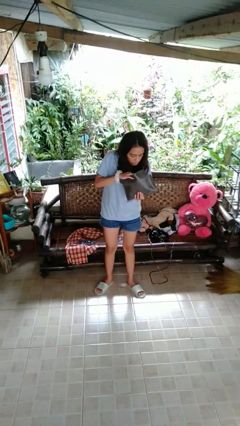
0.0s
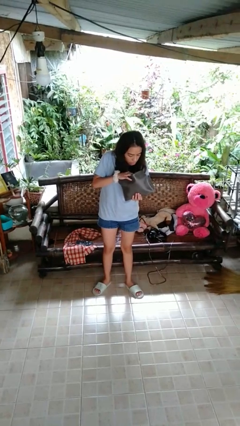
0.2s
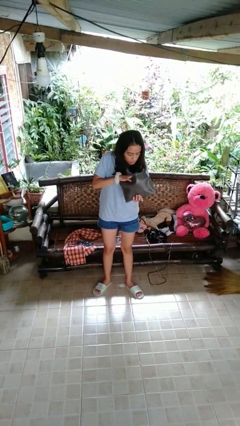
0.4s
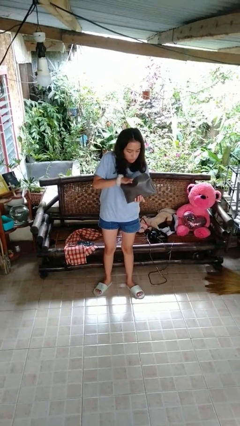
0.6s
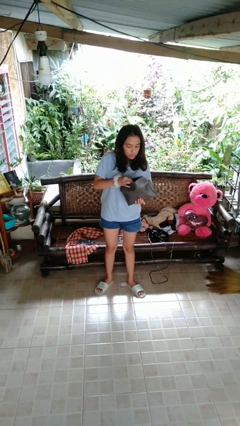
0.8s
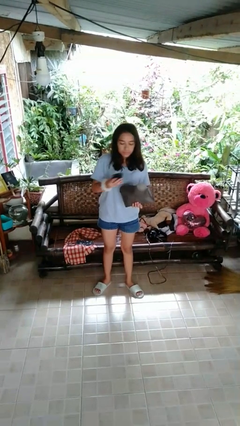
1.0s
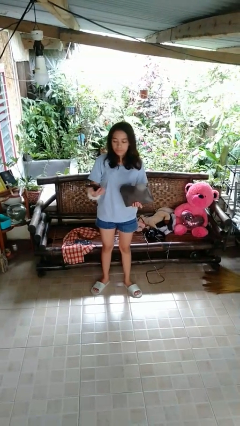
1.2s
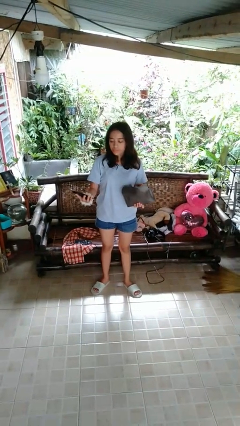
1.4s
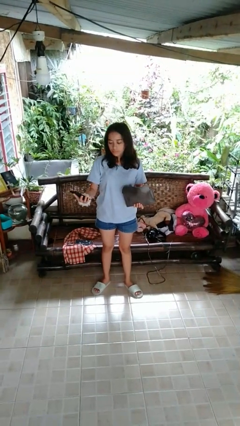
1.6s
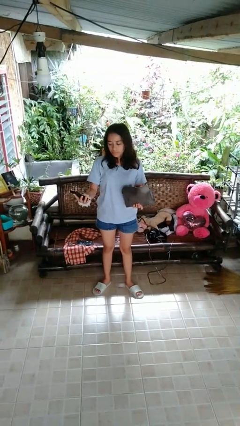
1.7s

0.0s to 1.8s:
person takes object from purse

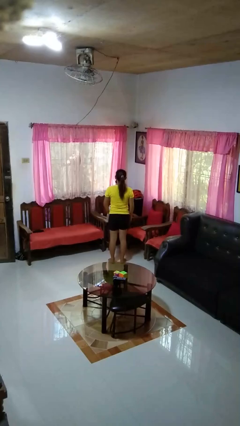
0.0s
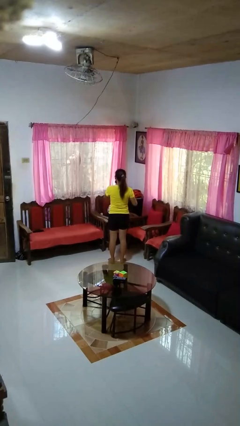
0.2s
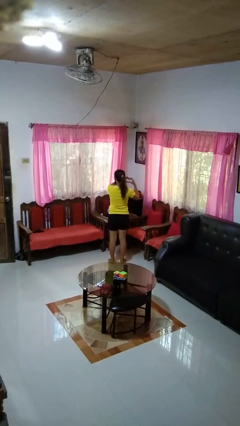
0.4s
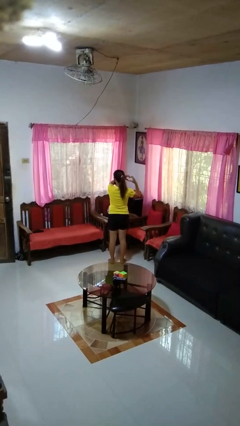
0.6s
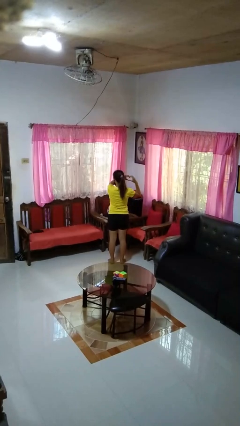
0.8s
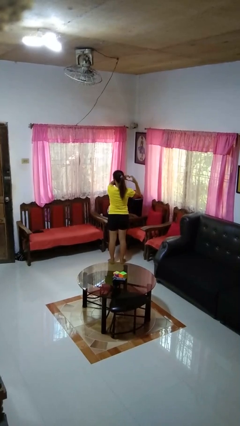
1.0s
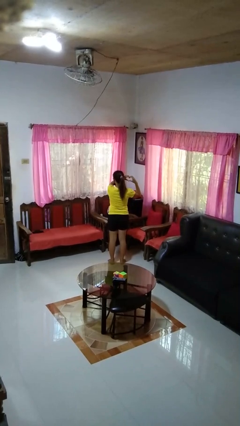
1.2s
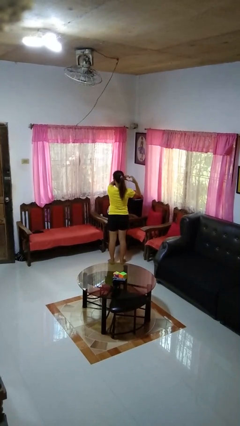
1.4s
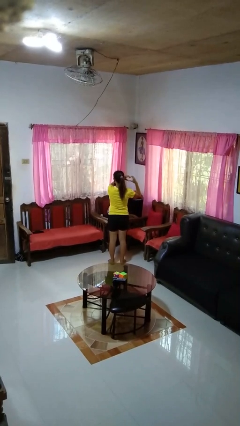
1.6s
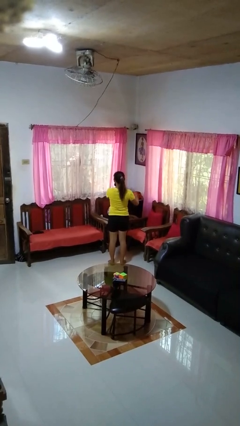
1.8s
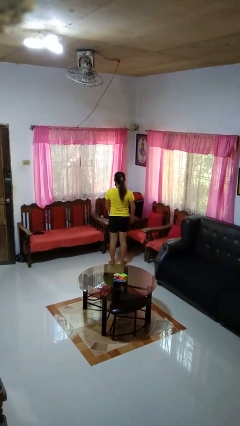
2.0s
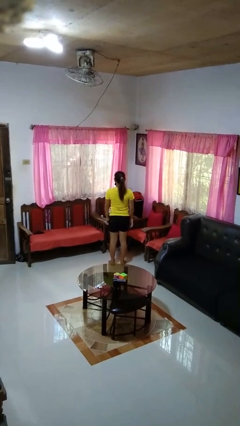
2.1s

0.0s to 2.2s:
person gestures heart

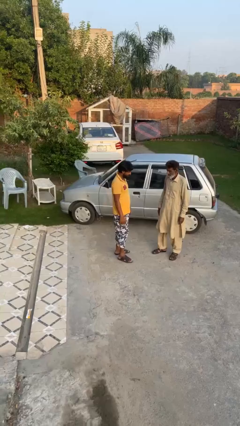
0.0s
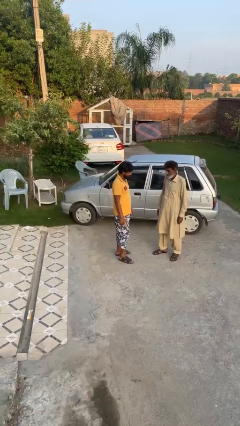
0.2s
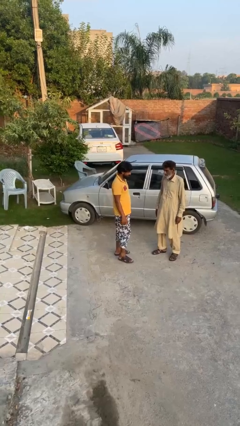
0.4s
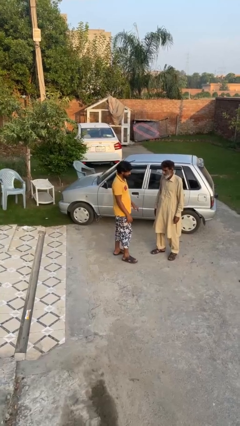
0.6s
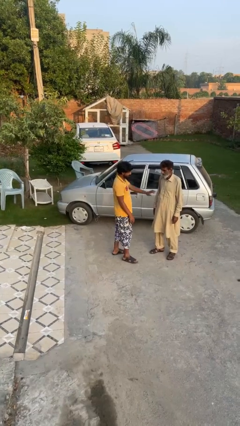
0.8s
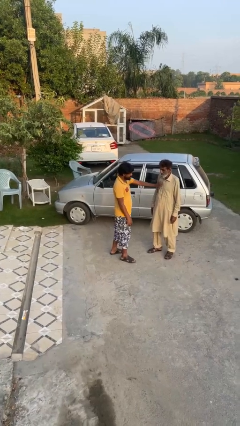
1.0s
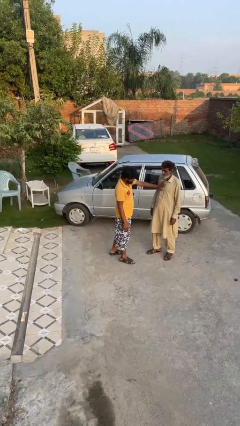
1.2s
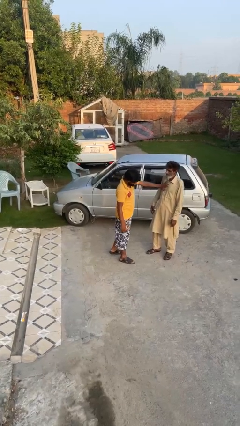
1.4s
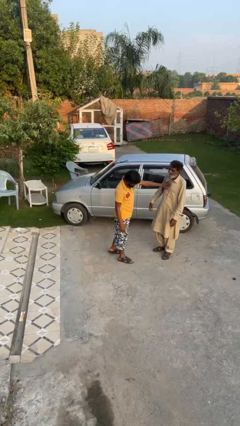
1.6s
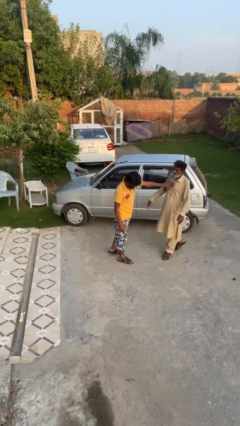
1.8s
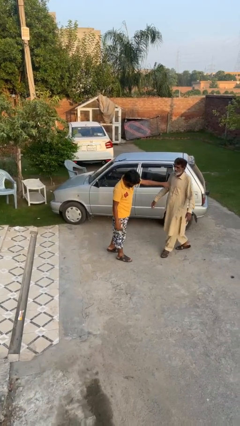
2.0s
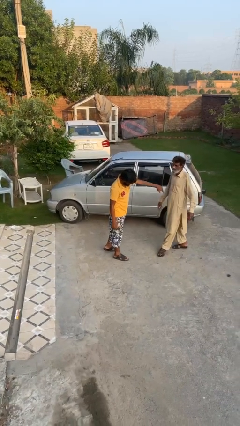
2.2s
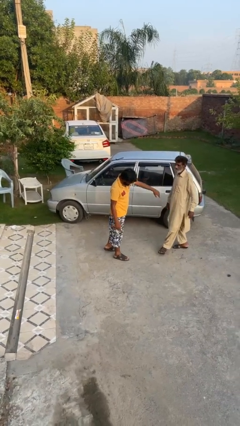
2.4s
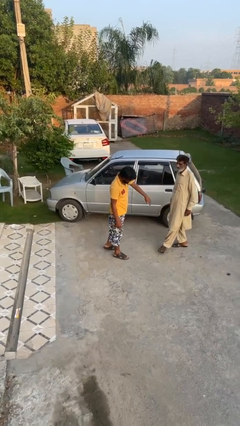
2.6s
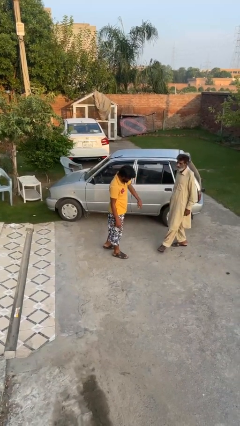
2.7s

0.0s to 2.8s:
person shoves person

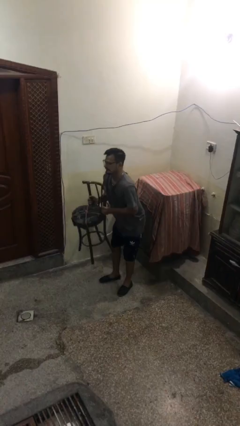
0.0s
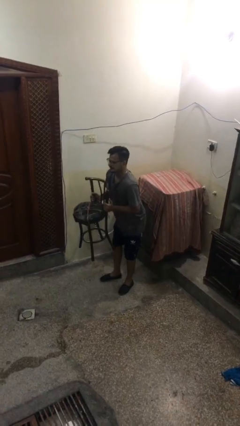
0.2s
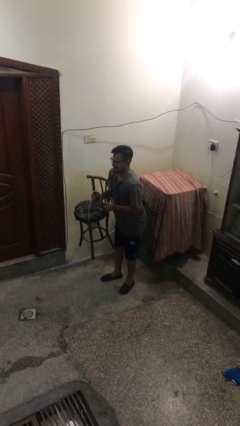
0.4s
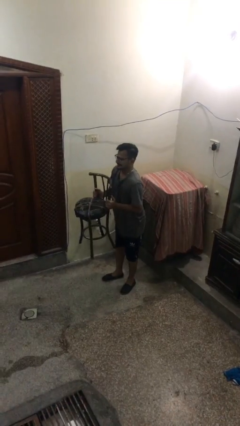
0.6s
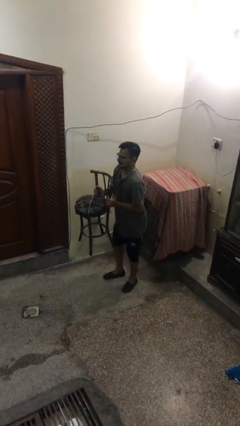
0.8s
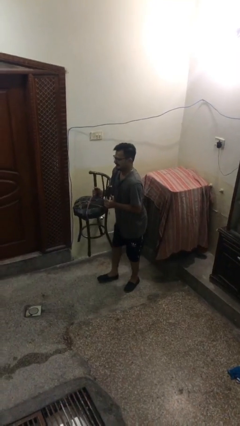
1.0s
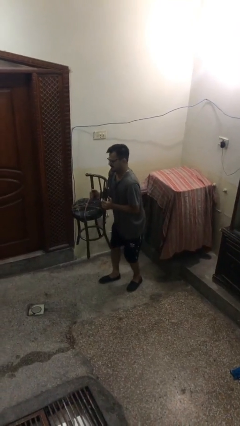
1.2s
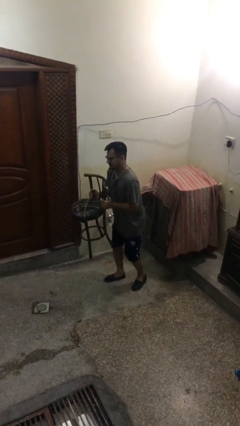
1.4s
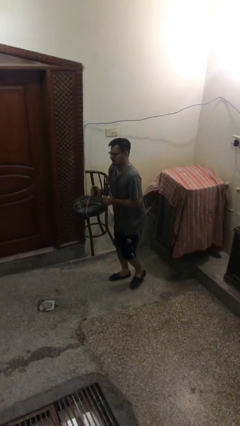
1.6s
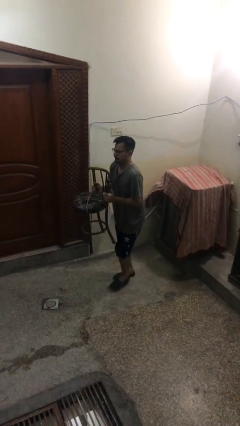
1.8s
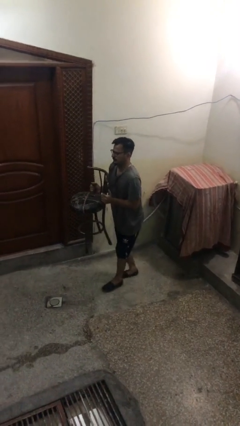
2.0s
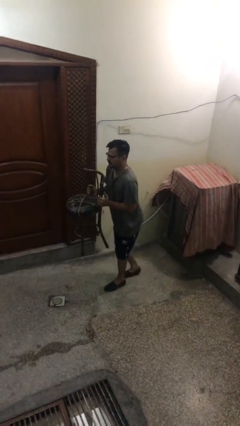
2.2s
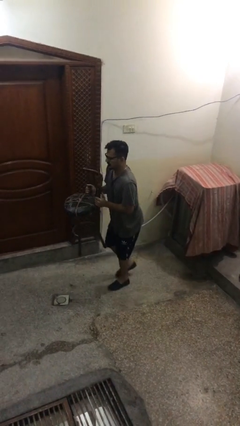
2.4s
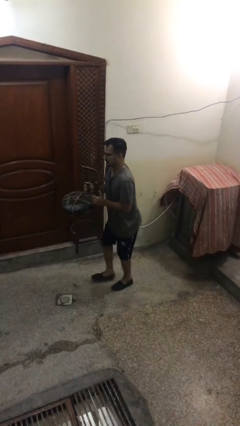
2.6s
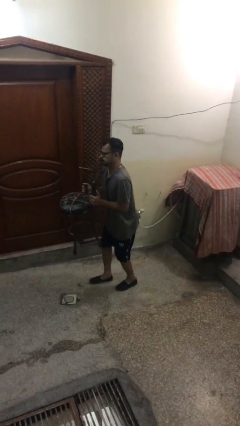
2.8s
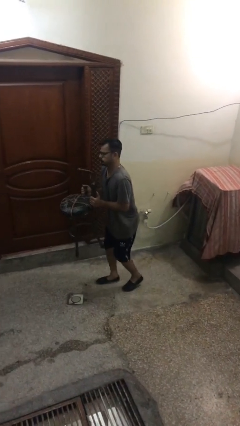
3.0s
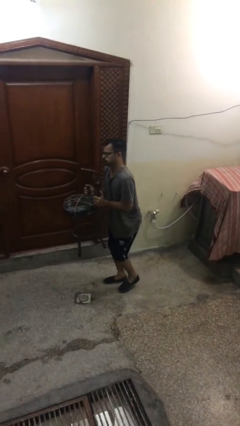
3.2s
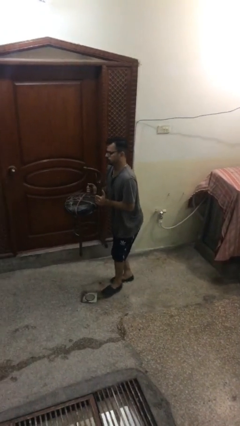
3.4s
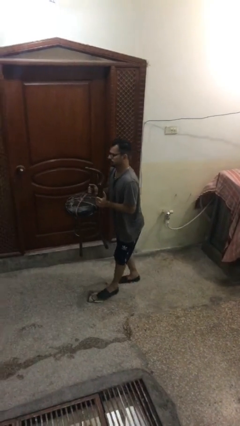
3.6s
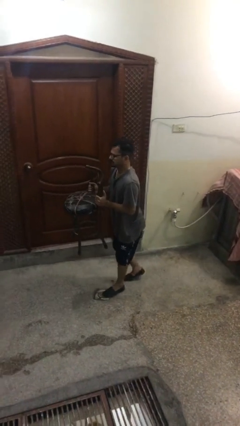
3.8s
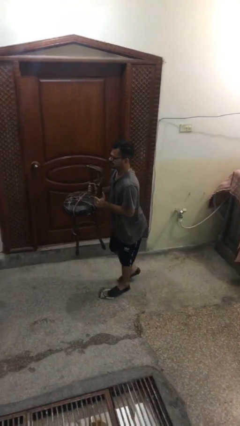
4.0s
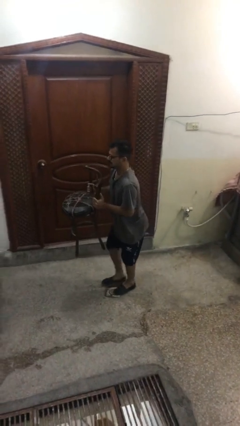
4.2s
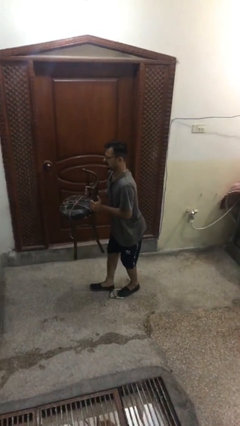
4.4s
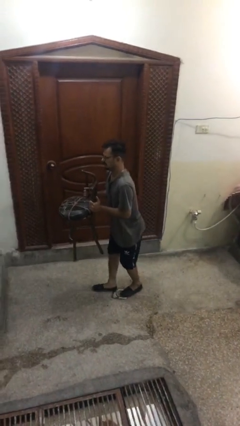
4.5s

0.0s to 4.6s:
person carries heavy object

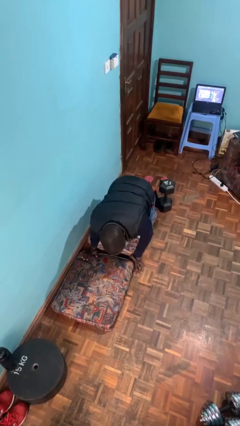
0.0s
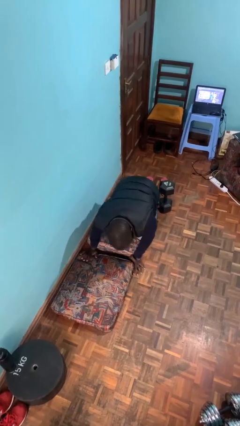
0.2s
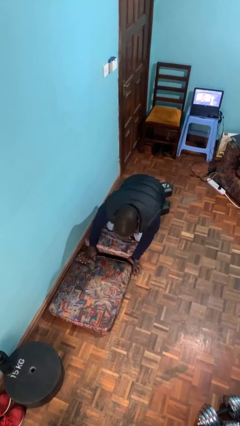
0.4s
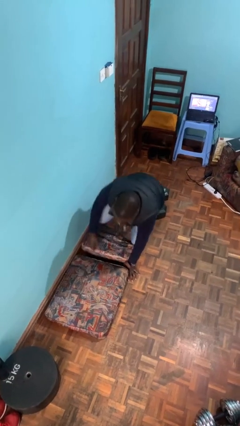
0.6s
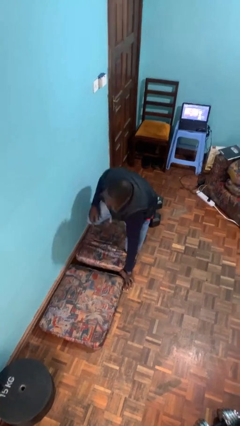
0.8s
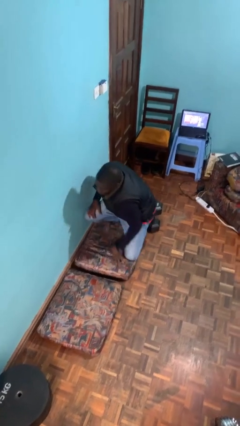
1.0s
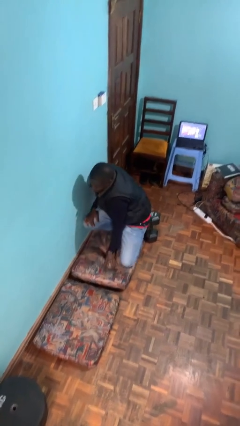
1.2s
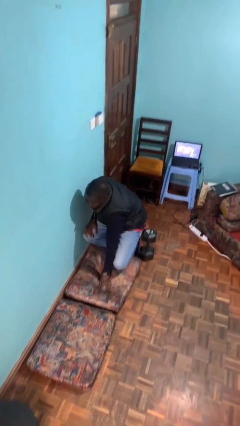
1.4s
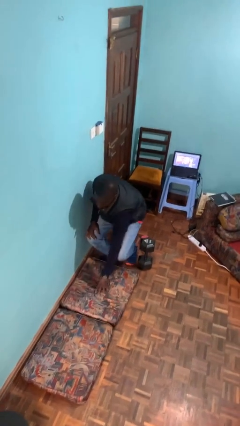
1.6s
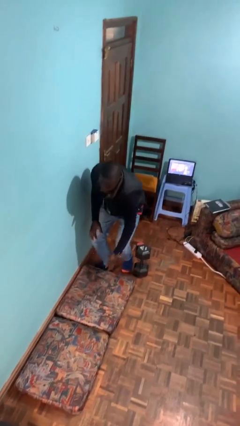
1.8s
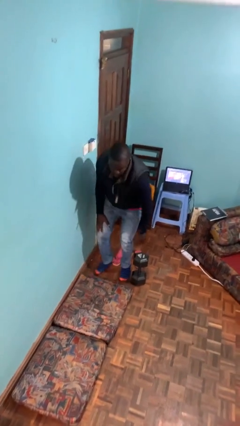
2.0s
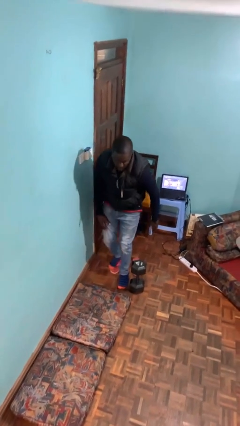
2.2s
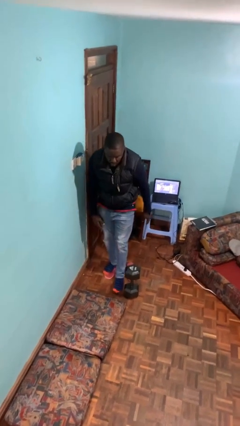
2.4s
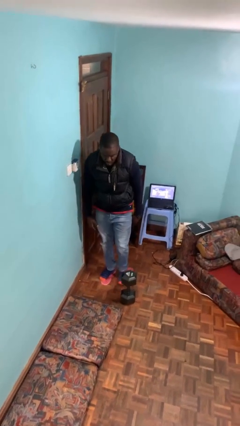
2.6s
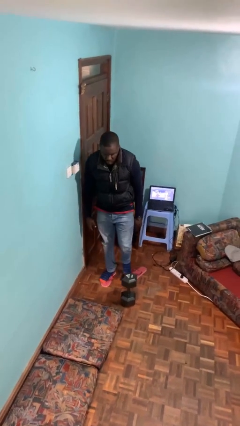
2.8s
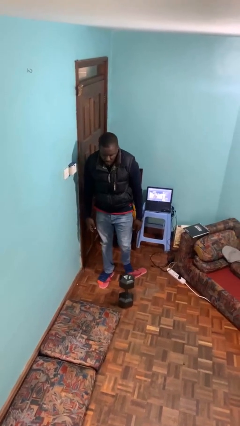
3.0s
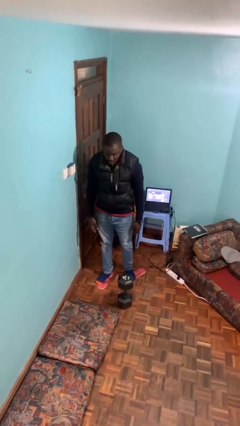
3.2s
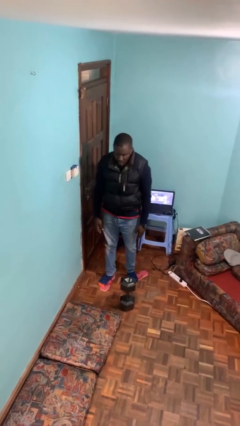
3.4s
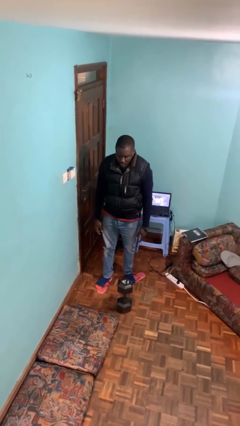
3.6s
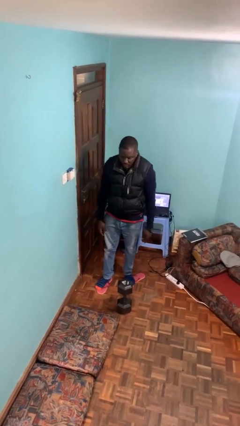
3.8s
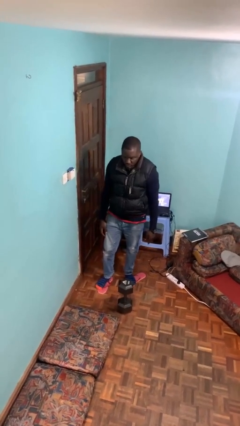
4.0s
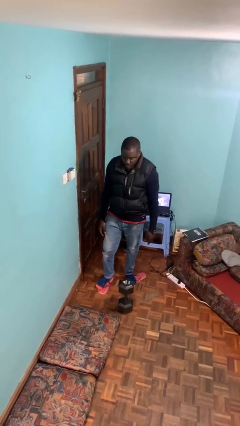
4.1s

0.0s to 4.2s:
person stands up from floor

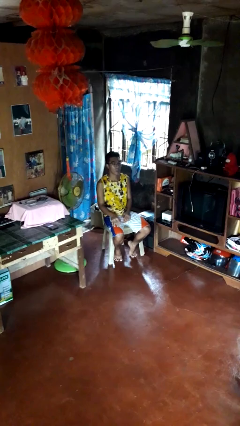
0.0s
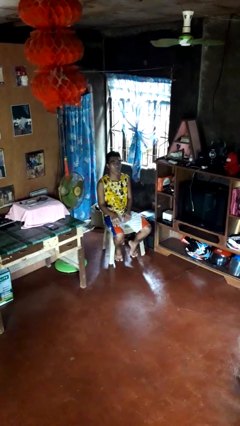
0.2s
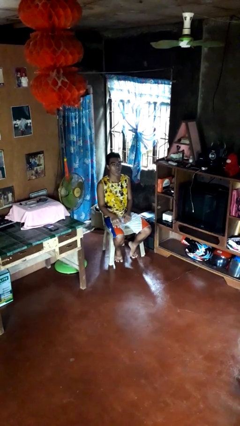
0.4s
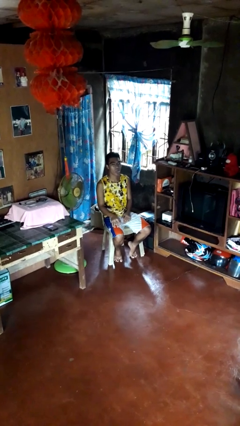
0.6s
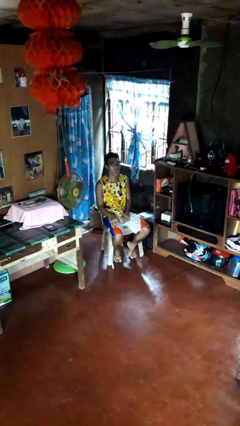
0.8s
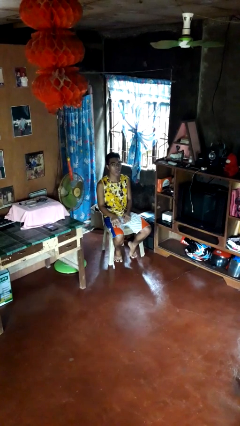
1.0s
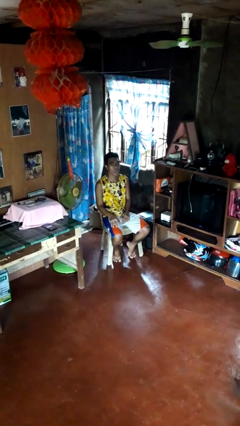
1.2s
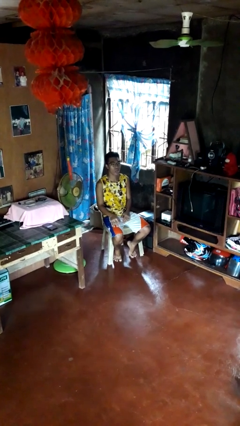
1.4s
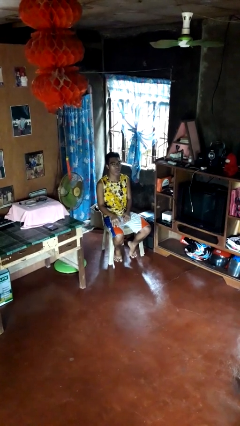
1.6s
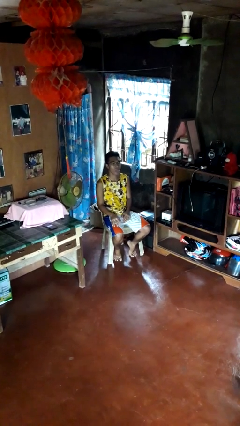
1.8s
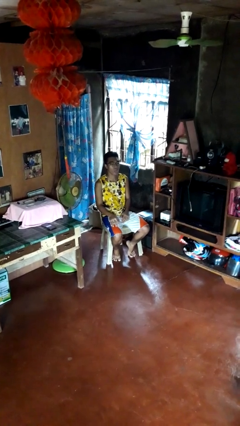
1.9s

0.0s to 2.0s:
person sticks out tongue
